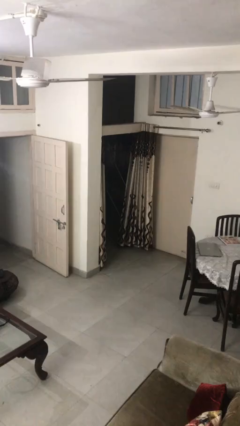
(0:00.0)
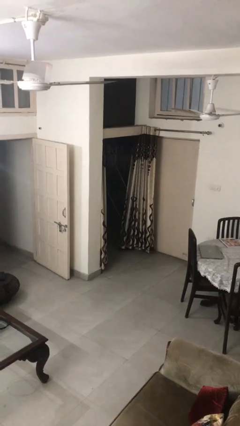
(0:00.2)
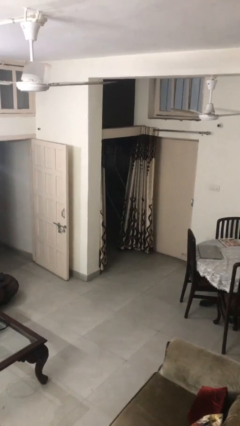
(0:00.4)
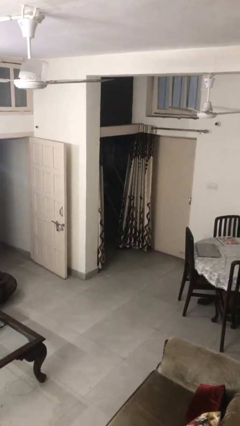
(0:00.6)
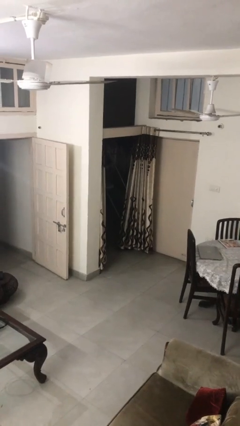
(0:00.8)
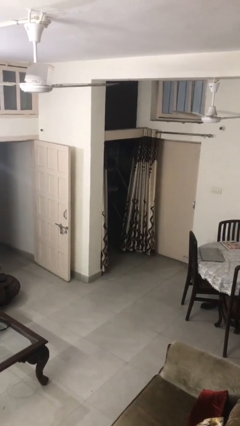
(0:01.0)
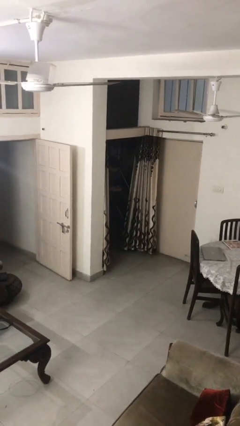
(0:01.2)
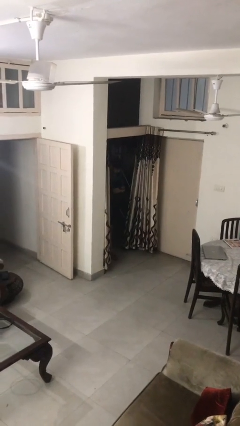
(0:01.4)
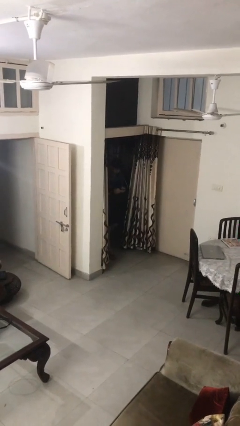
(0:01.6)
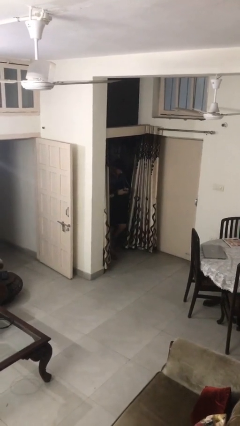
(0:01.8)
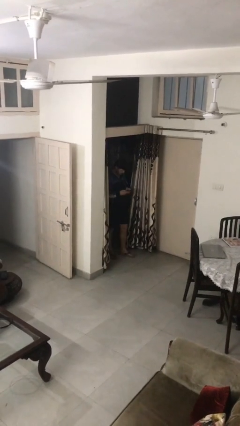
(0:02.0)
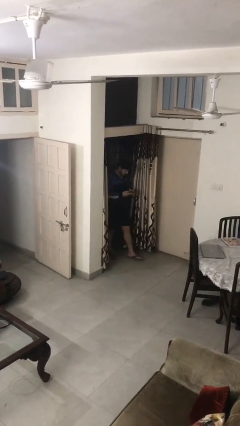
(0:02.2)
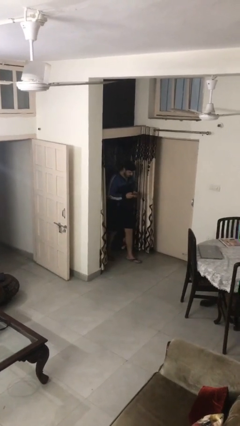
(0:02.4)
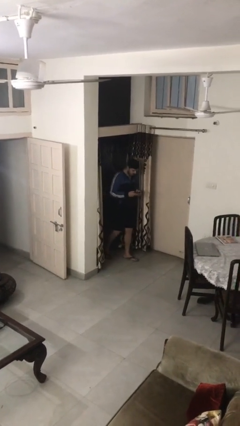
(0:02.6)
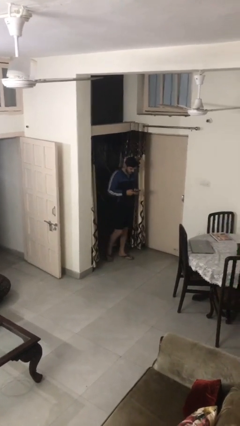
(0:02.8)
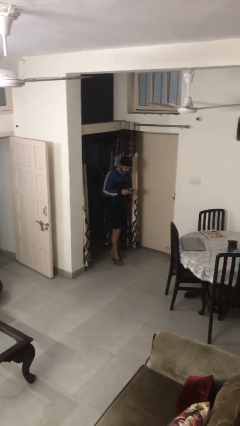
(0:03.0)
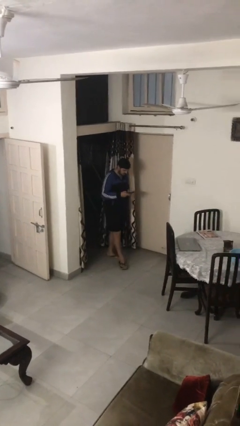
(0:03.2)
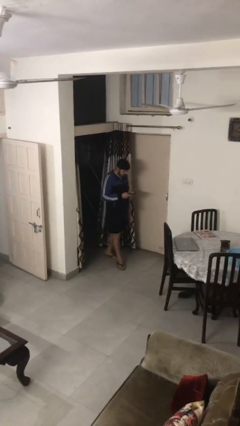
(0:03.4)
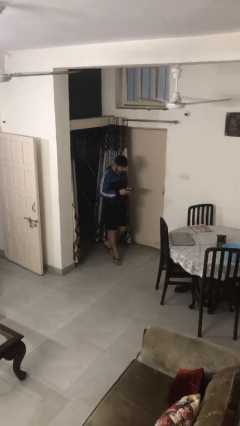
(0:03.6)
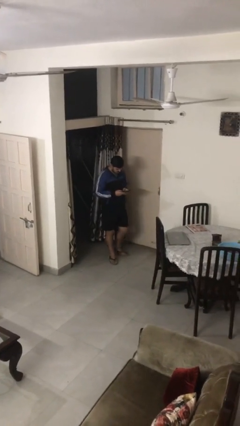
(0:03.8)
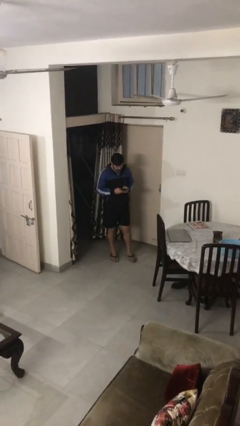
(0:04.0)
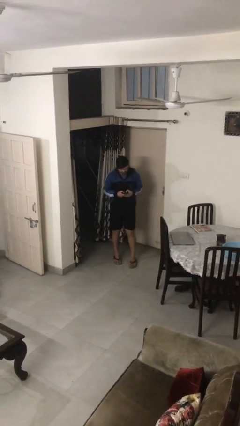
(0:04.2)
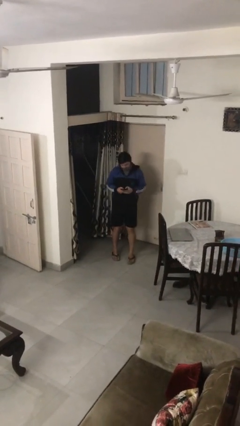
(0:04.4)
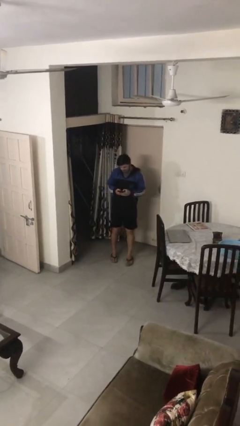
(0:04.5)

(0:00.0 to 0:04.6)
person enters scene through structure

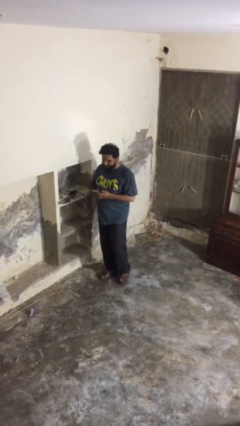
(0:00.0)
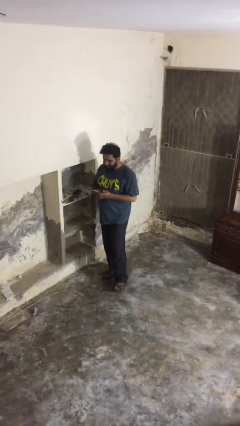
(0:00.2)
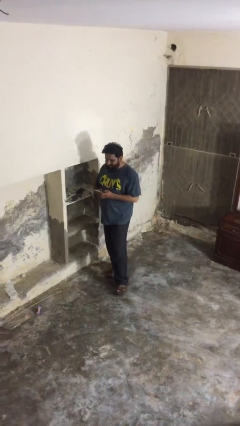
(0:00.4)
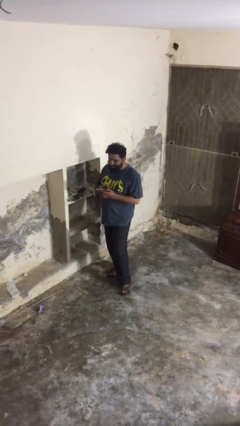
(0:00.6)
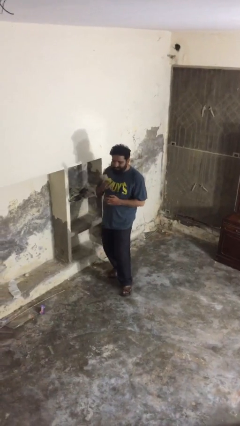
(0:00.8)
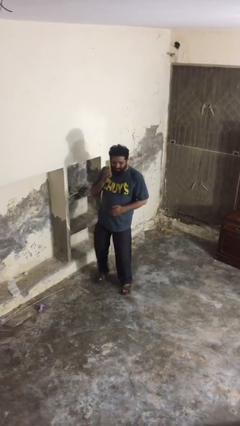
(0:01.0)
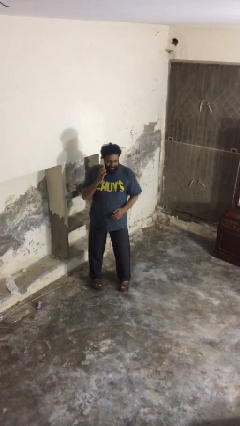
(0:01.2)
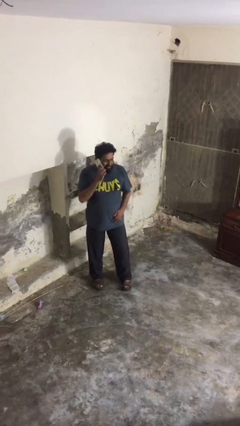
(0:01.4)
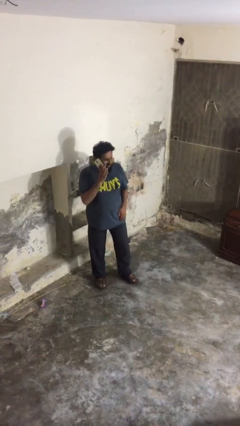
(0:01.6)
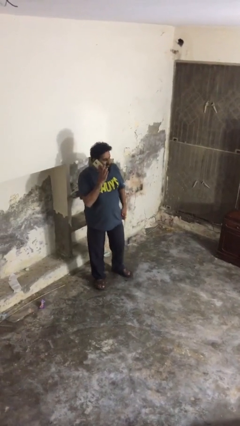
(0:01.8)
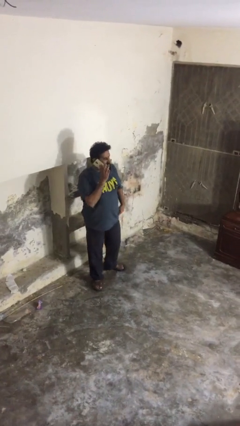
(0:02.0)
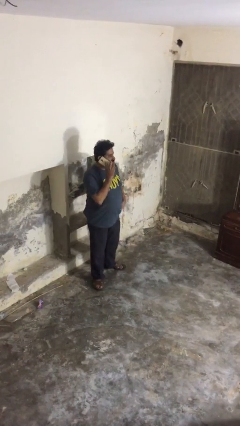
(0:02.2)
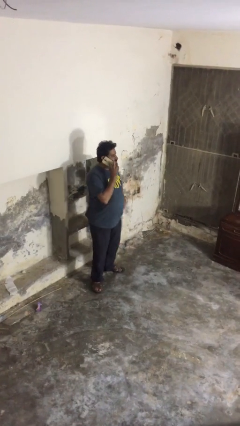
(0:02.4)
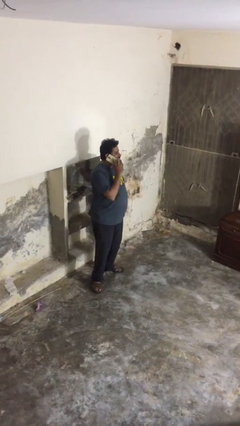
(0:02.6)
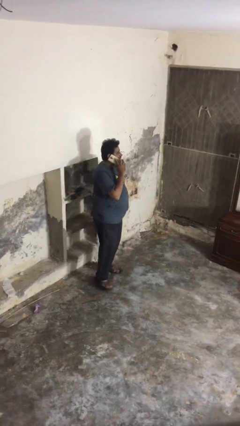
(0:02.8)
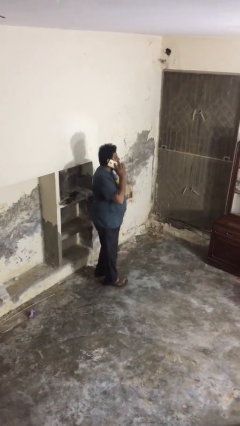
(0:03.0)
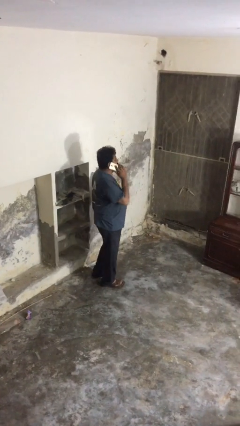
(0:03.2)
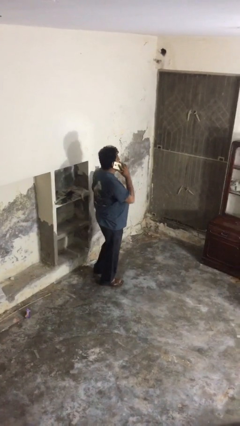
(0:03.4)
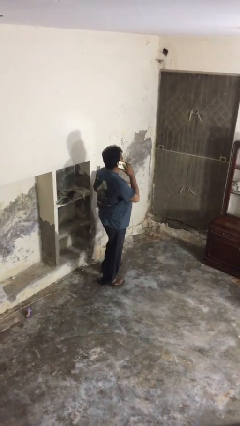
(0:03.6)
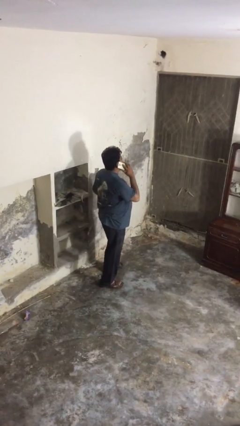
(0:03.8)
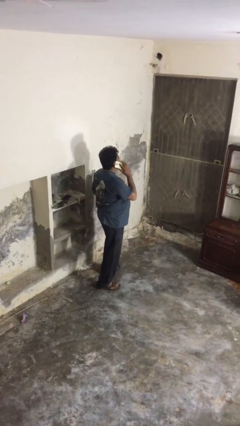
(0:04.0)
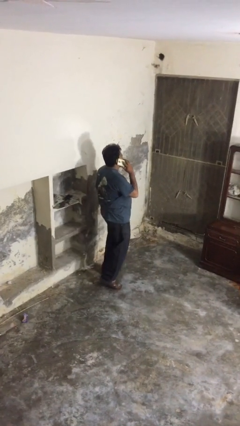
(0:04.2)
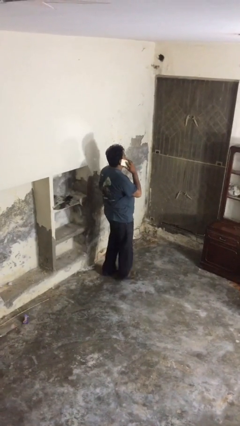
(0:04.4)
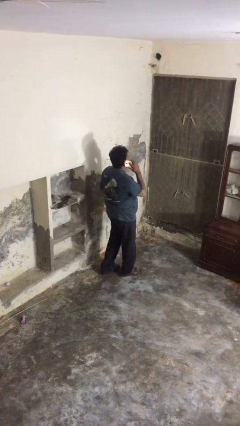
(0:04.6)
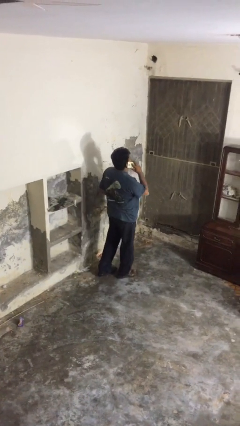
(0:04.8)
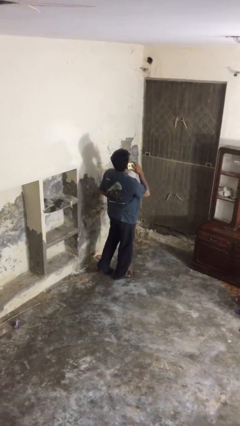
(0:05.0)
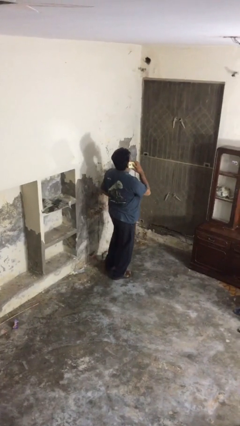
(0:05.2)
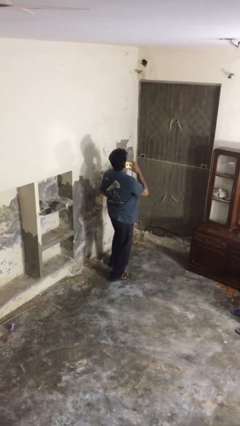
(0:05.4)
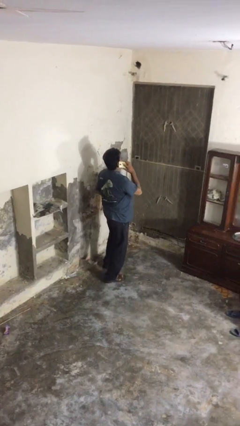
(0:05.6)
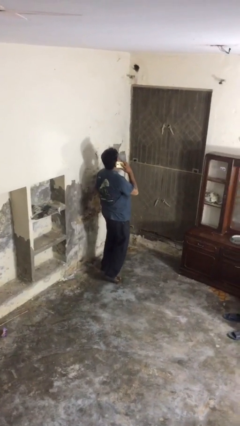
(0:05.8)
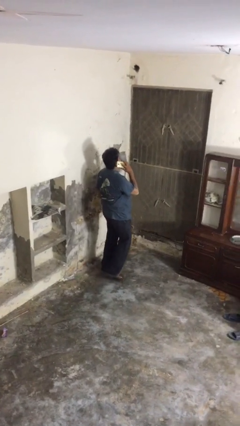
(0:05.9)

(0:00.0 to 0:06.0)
person talks on phone

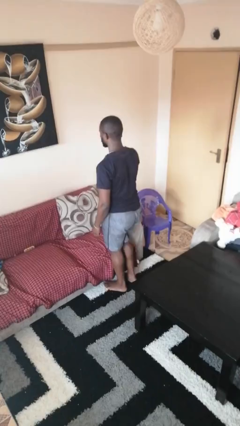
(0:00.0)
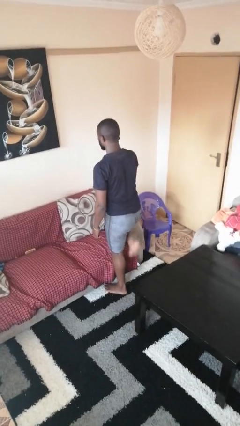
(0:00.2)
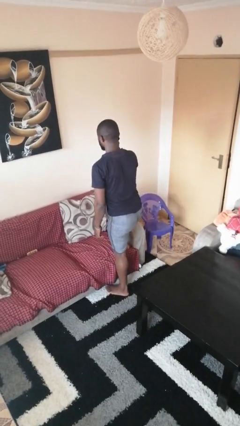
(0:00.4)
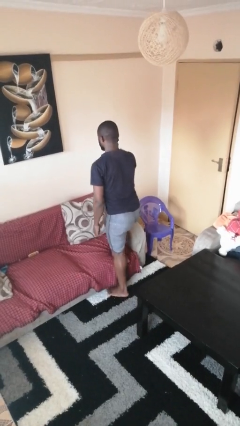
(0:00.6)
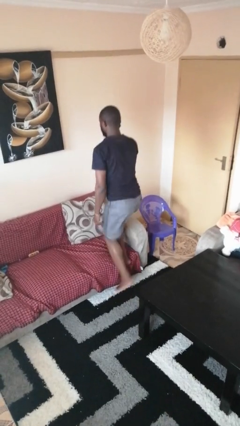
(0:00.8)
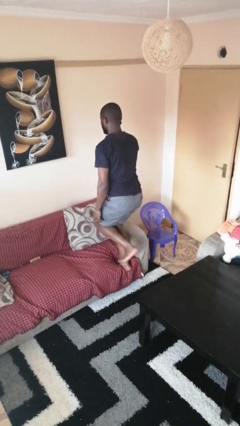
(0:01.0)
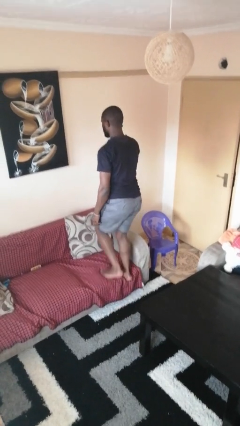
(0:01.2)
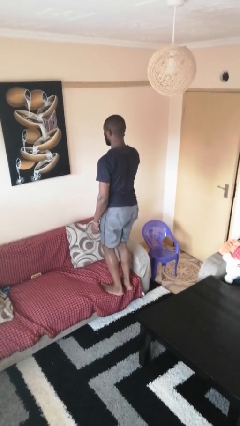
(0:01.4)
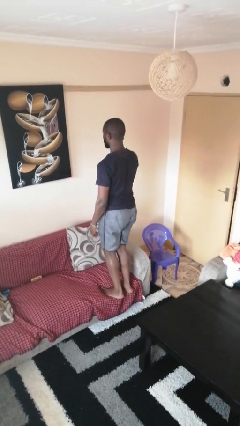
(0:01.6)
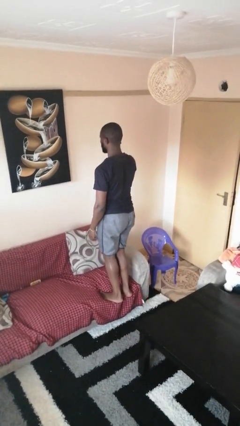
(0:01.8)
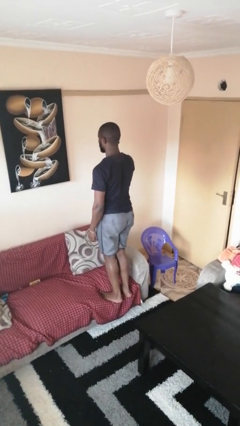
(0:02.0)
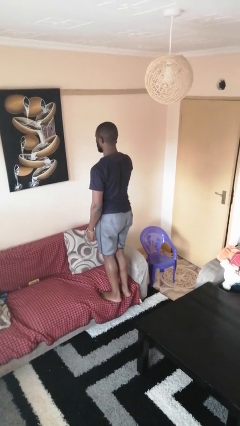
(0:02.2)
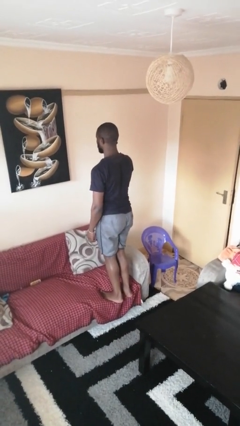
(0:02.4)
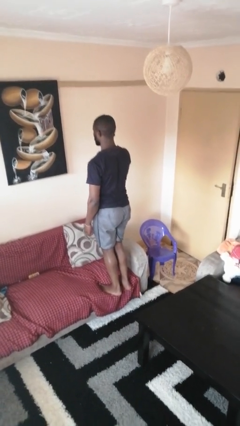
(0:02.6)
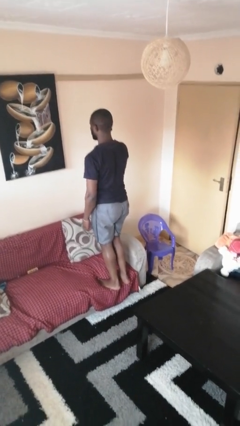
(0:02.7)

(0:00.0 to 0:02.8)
person climbs on couch

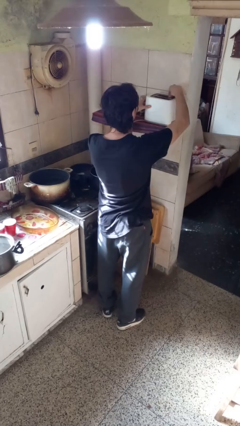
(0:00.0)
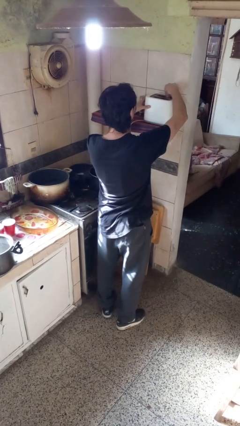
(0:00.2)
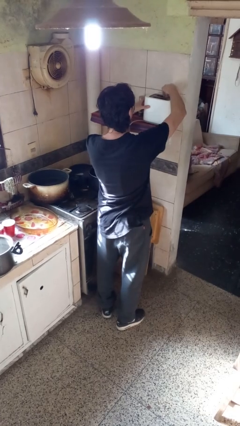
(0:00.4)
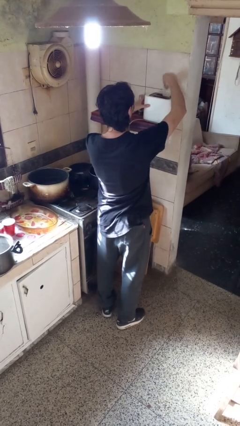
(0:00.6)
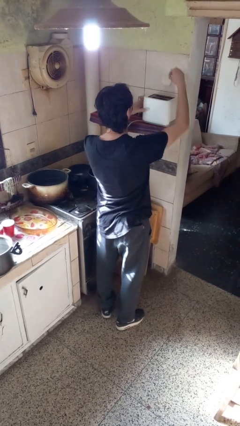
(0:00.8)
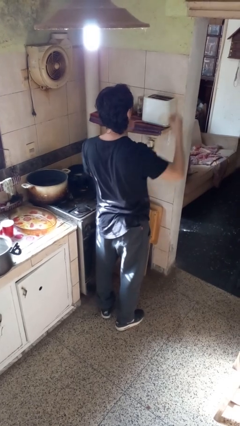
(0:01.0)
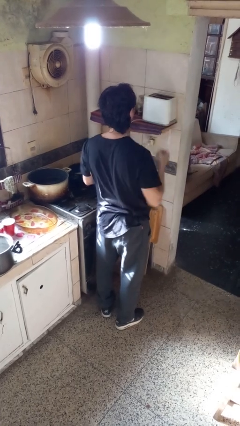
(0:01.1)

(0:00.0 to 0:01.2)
person takes object from toaster

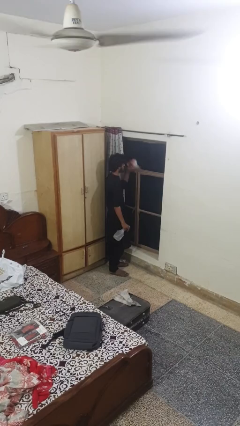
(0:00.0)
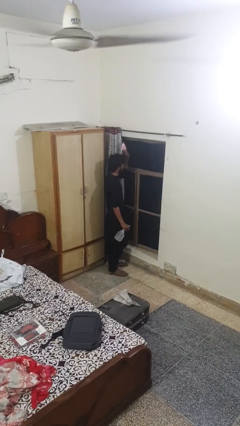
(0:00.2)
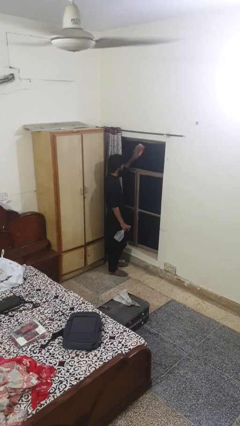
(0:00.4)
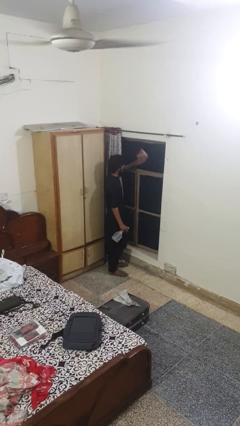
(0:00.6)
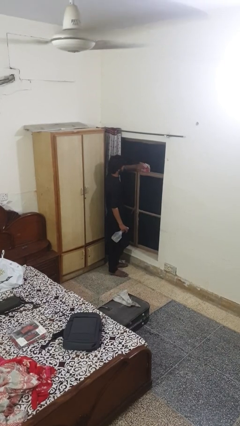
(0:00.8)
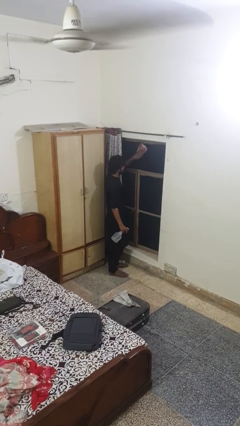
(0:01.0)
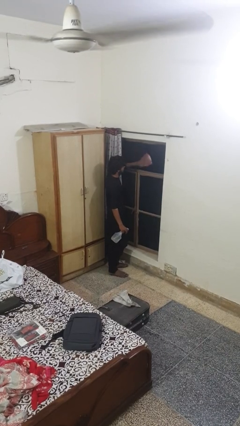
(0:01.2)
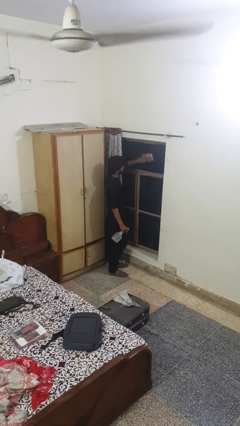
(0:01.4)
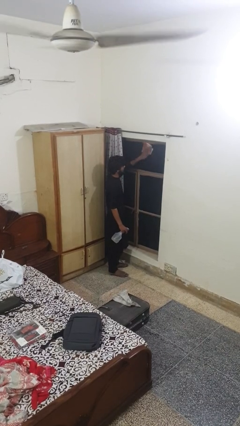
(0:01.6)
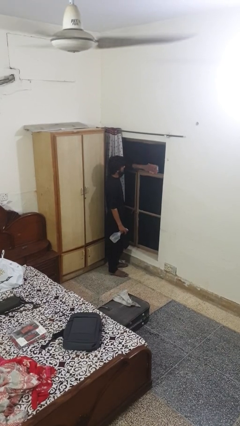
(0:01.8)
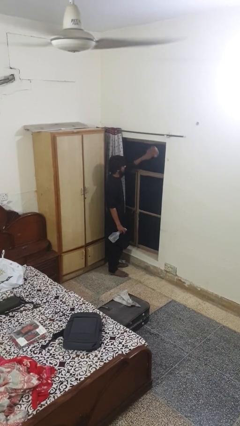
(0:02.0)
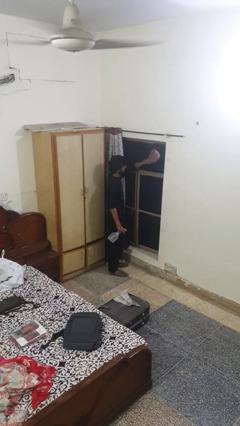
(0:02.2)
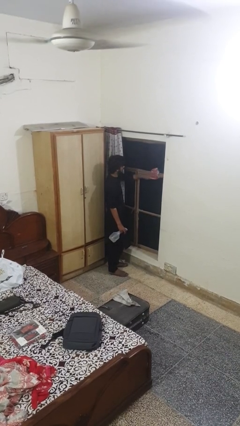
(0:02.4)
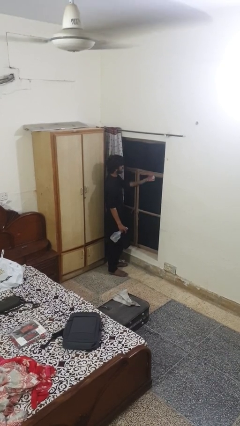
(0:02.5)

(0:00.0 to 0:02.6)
person washes window

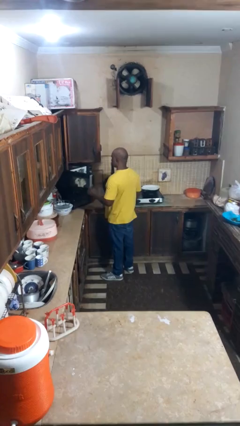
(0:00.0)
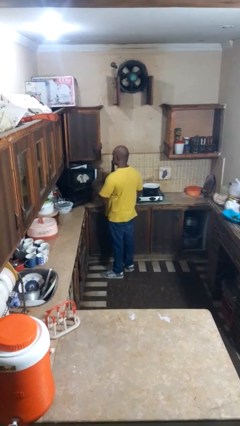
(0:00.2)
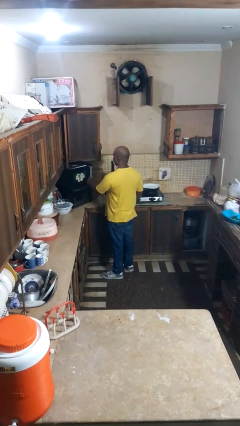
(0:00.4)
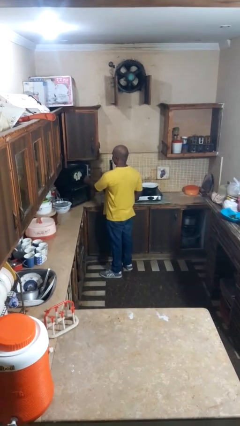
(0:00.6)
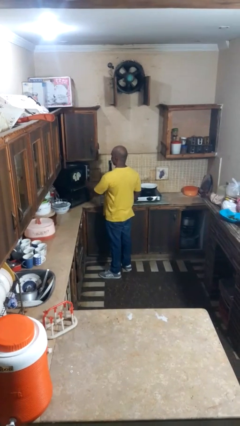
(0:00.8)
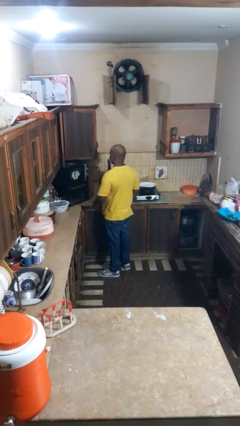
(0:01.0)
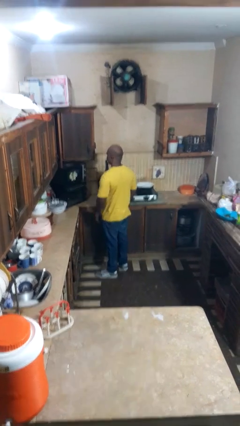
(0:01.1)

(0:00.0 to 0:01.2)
person closes microwave
